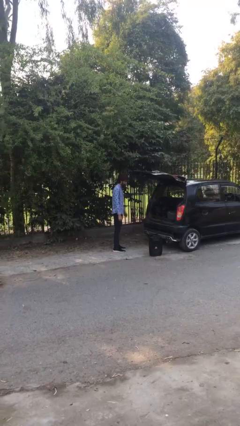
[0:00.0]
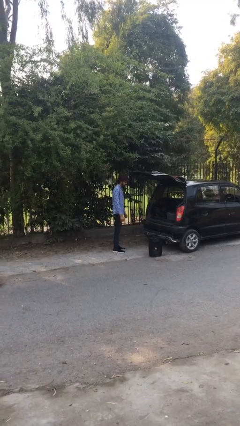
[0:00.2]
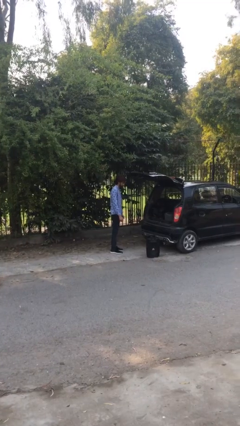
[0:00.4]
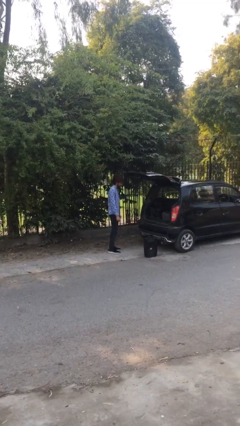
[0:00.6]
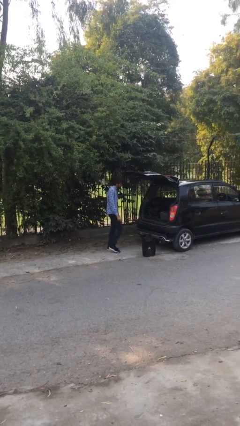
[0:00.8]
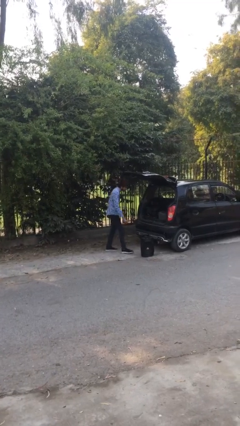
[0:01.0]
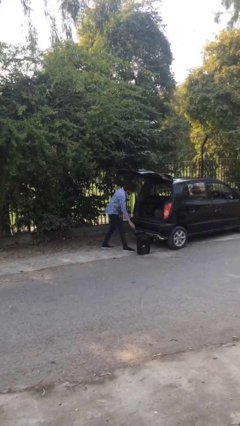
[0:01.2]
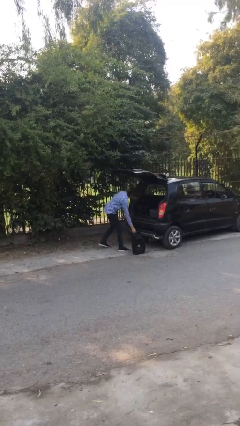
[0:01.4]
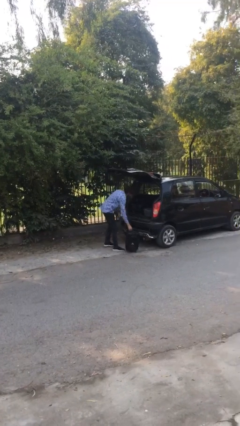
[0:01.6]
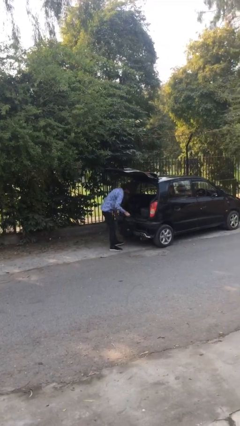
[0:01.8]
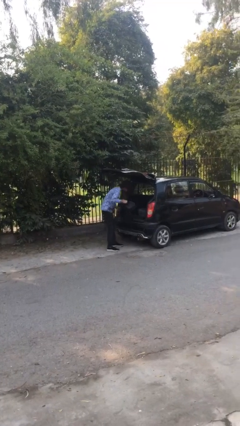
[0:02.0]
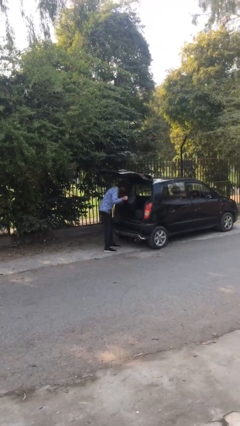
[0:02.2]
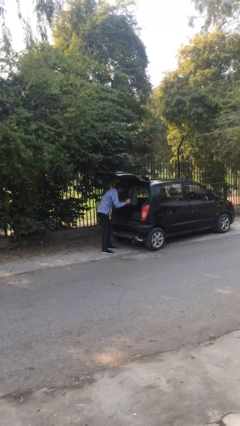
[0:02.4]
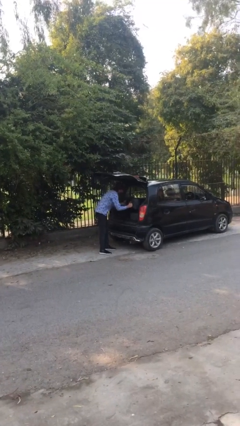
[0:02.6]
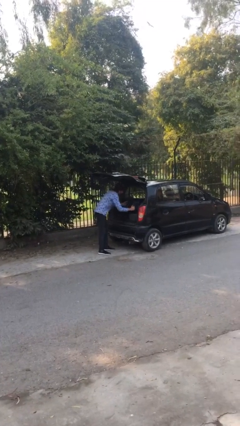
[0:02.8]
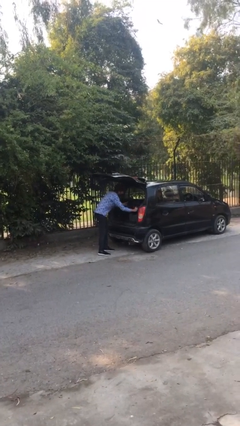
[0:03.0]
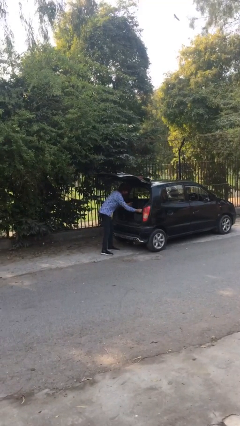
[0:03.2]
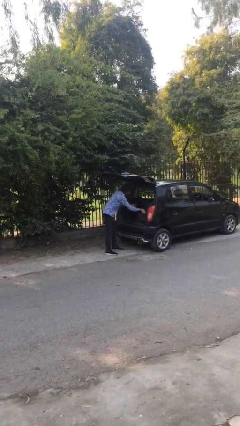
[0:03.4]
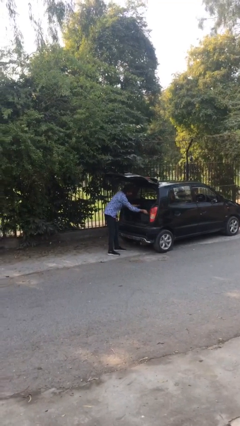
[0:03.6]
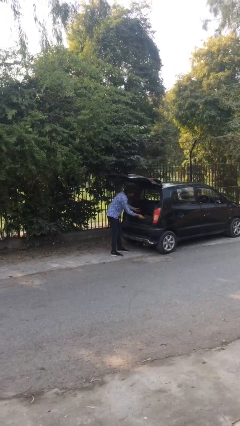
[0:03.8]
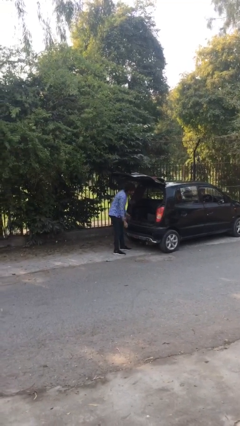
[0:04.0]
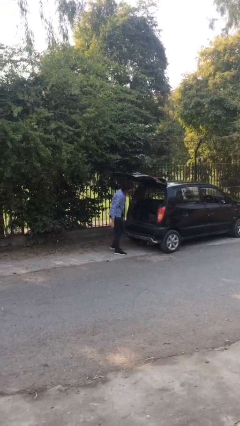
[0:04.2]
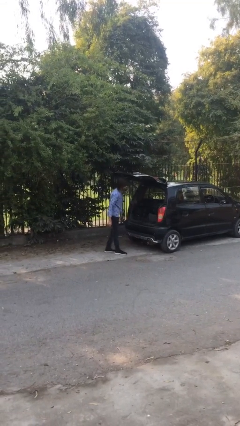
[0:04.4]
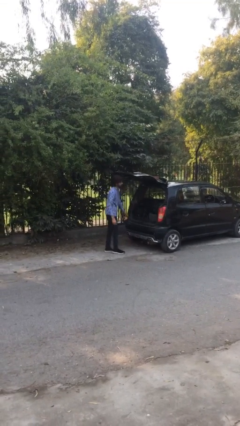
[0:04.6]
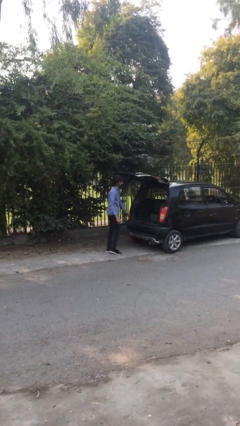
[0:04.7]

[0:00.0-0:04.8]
person loads car

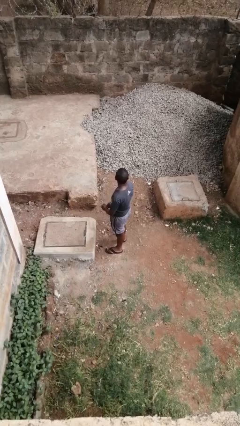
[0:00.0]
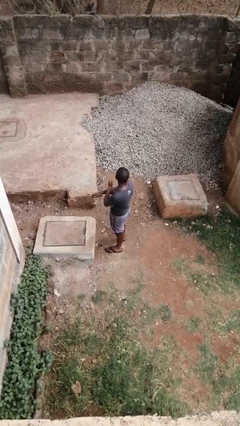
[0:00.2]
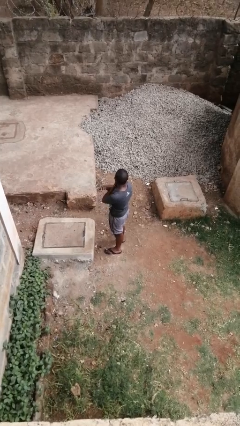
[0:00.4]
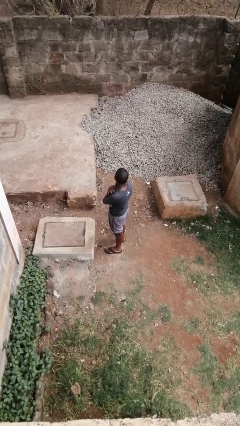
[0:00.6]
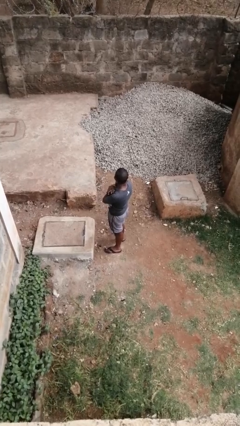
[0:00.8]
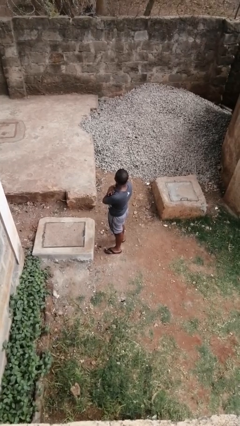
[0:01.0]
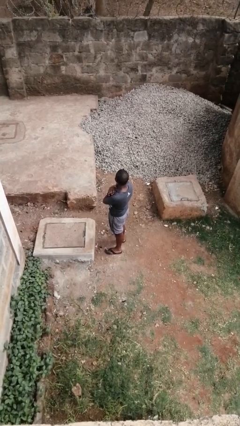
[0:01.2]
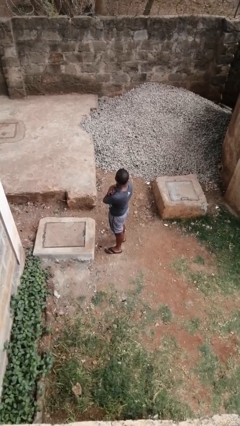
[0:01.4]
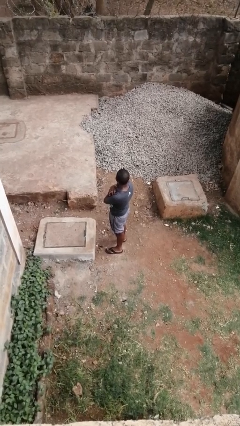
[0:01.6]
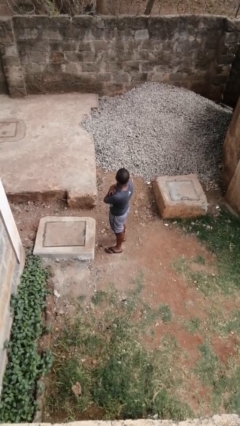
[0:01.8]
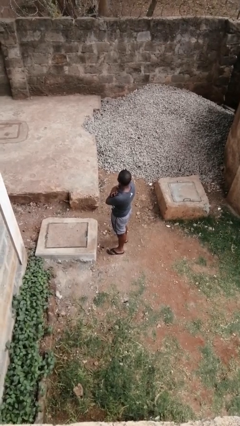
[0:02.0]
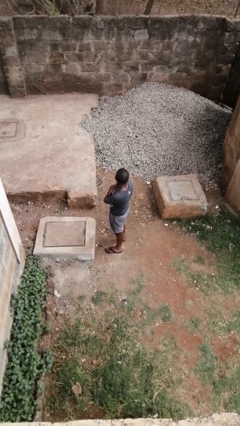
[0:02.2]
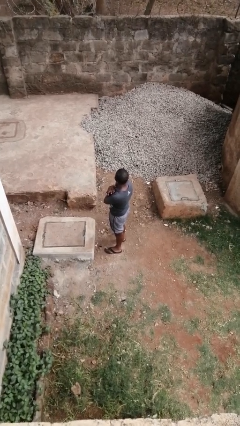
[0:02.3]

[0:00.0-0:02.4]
person gestures arms x

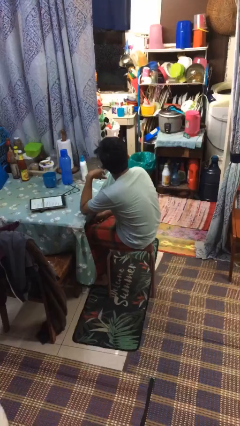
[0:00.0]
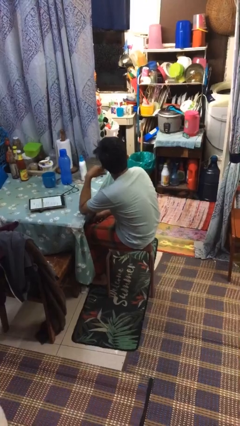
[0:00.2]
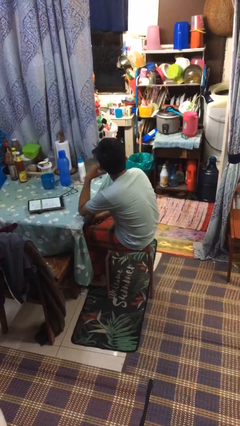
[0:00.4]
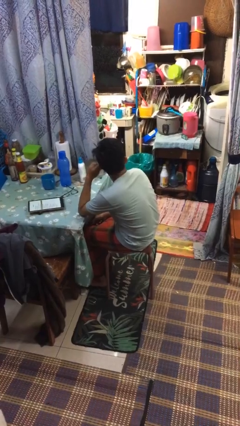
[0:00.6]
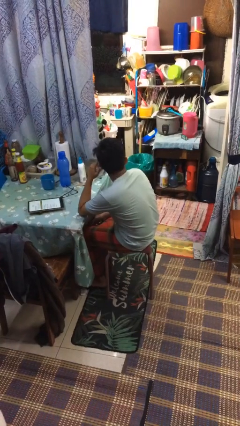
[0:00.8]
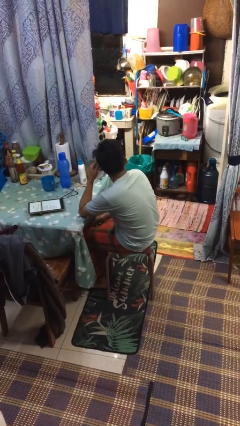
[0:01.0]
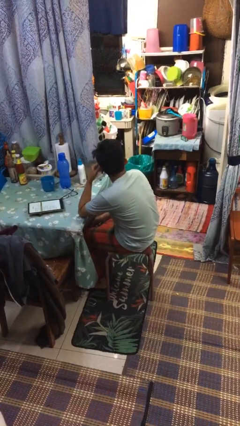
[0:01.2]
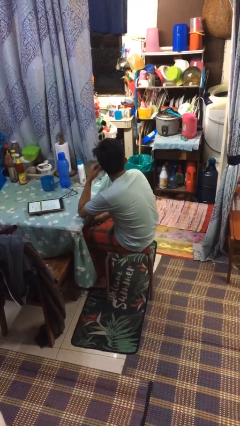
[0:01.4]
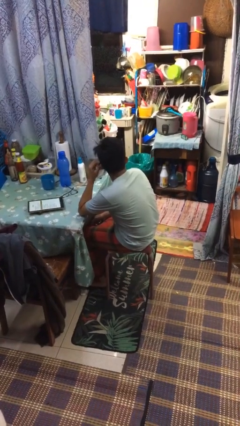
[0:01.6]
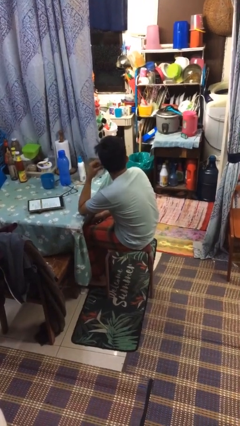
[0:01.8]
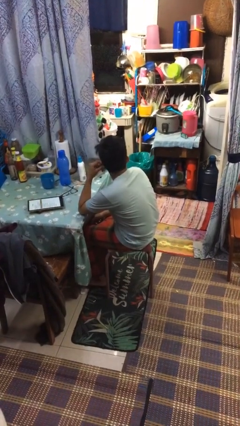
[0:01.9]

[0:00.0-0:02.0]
person touches earlobe

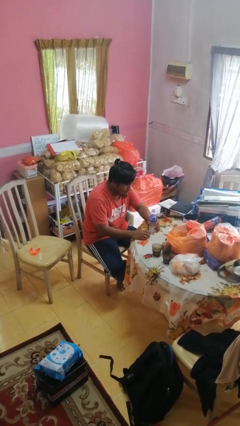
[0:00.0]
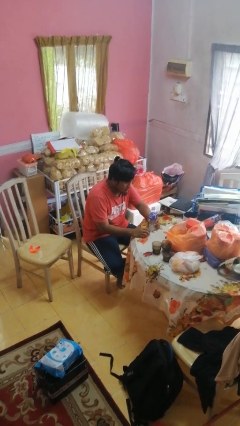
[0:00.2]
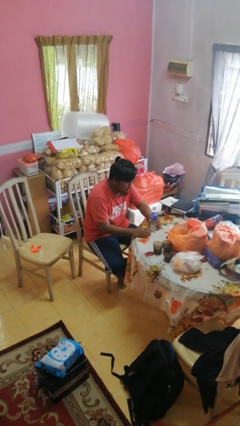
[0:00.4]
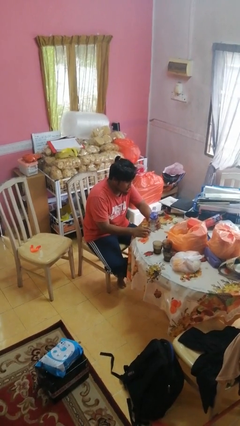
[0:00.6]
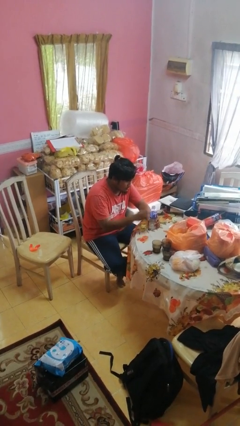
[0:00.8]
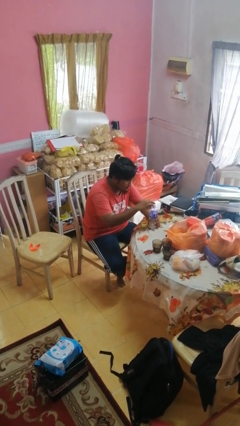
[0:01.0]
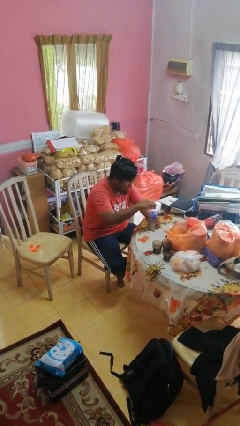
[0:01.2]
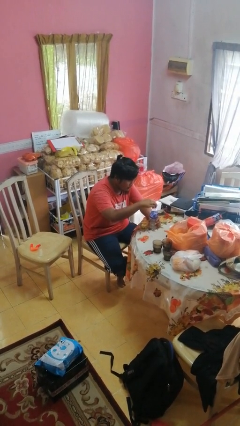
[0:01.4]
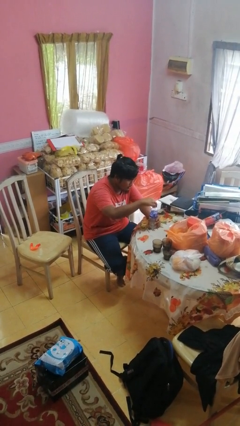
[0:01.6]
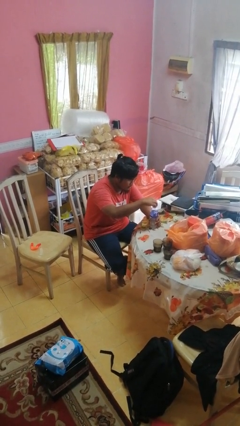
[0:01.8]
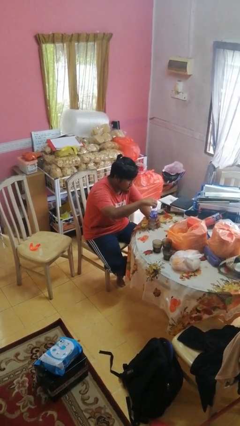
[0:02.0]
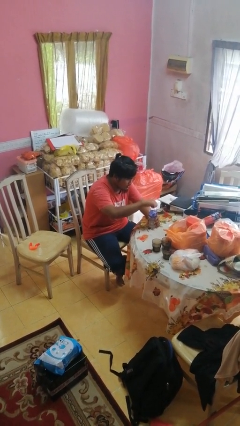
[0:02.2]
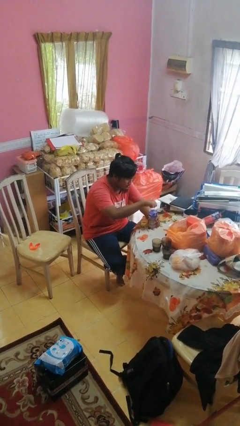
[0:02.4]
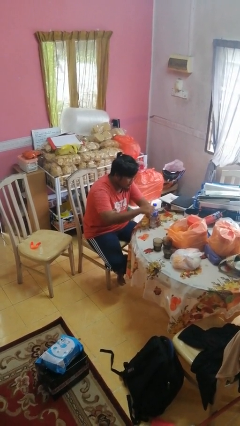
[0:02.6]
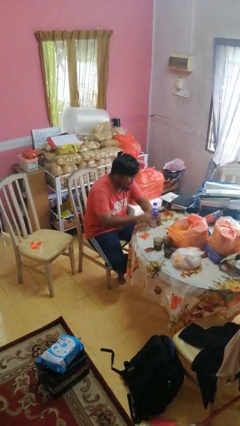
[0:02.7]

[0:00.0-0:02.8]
person screws lid to bottle

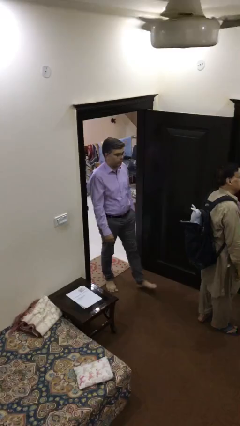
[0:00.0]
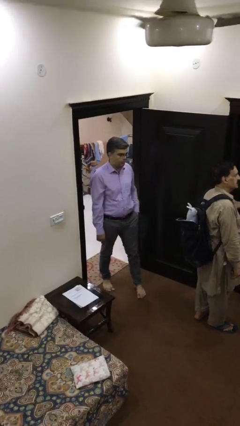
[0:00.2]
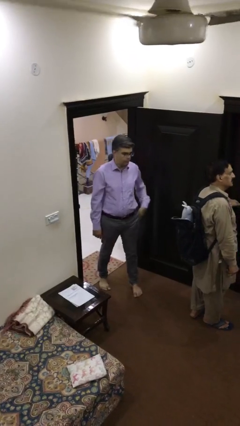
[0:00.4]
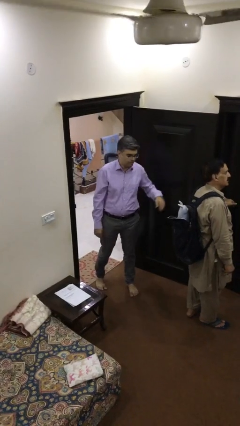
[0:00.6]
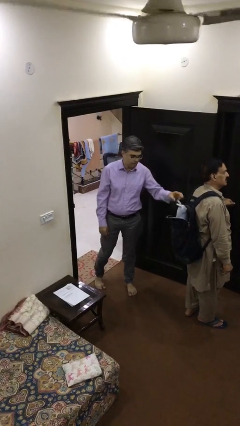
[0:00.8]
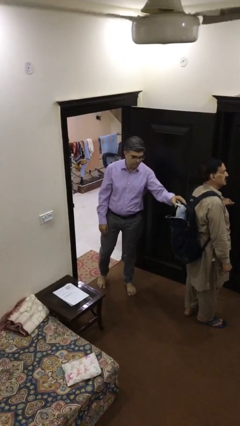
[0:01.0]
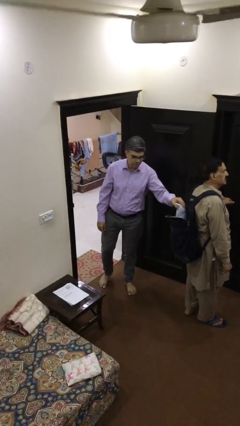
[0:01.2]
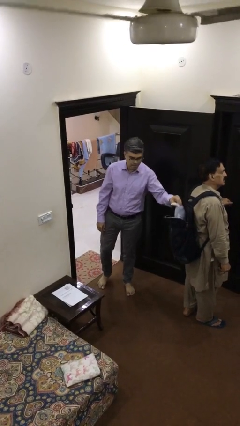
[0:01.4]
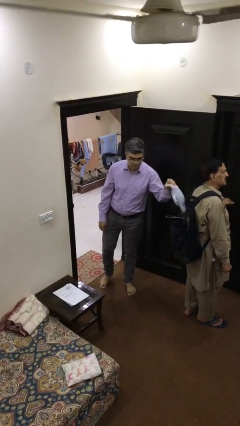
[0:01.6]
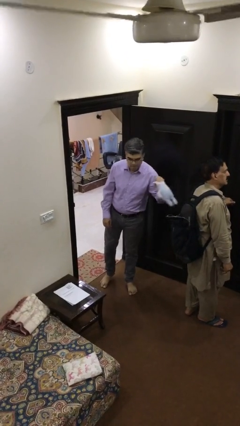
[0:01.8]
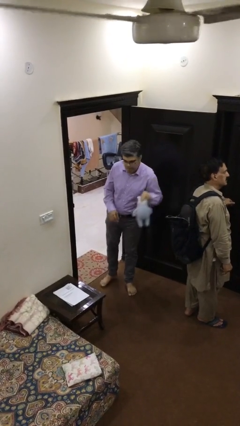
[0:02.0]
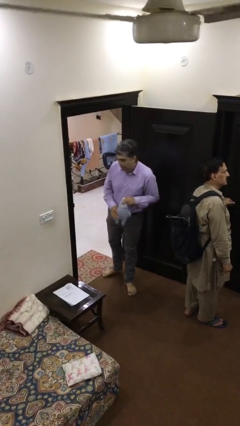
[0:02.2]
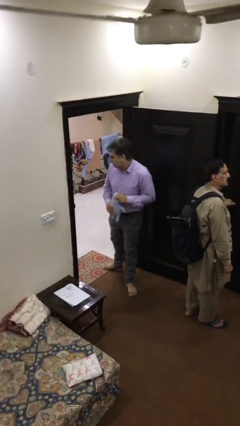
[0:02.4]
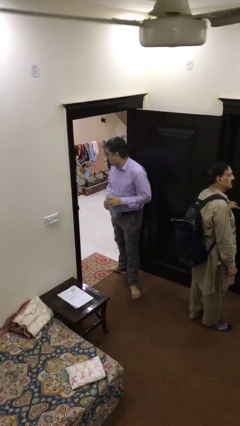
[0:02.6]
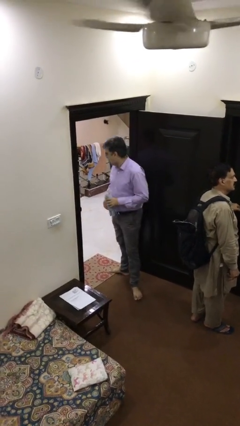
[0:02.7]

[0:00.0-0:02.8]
person steals object from person

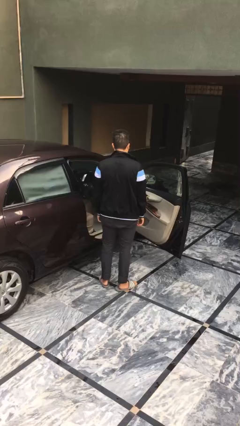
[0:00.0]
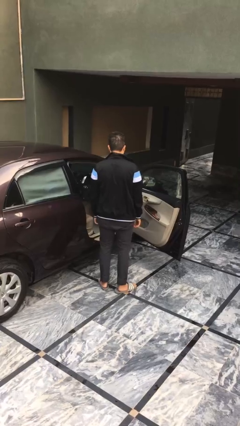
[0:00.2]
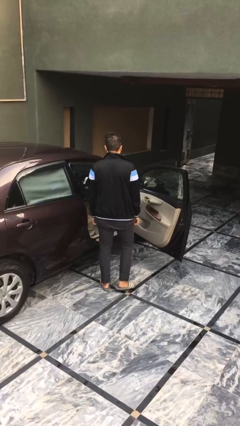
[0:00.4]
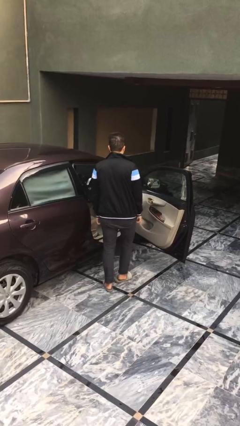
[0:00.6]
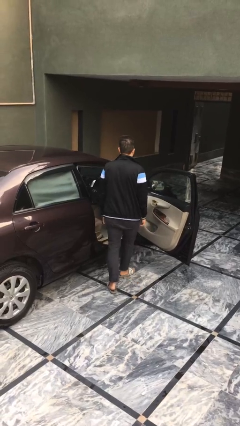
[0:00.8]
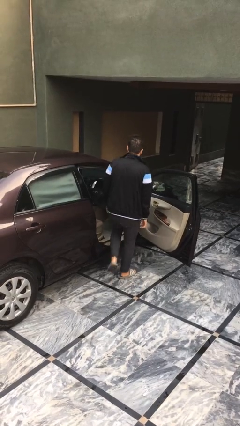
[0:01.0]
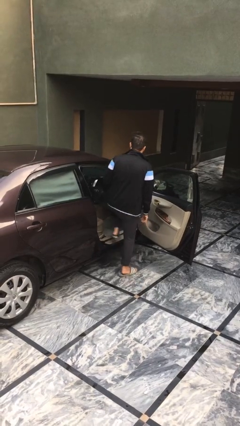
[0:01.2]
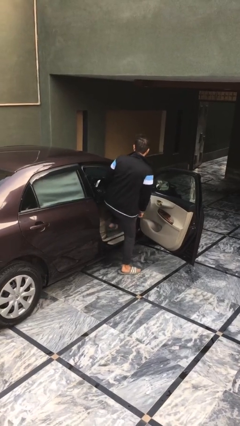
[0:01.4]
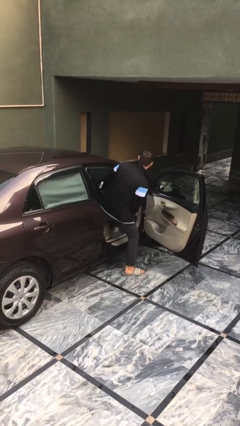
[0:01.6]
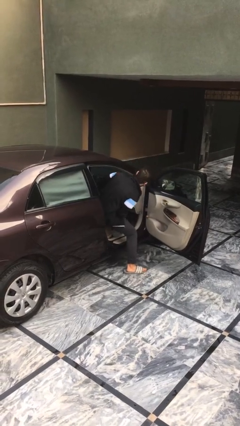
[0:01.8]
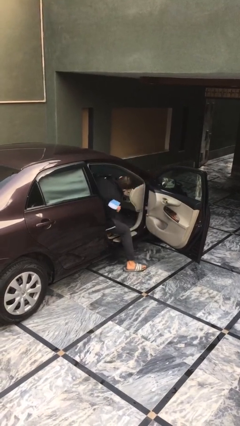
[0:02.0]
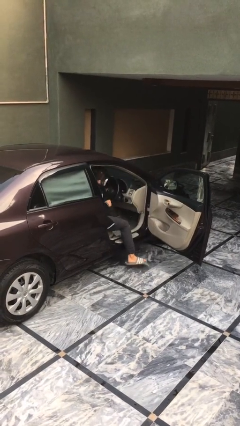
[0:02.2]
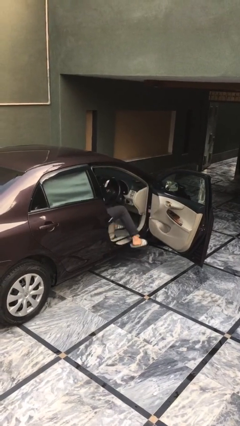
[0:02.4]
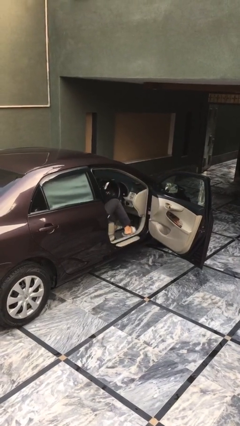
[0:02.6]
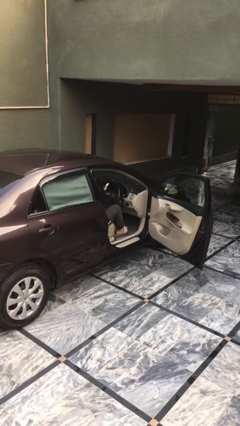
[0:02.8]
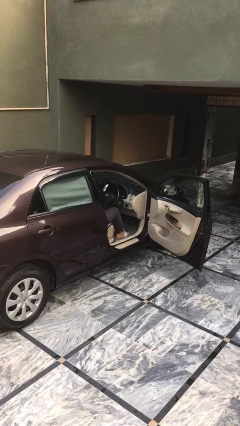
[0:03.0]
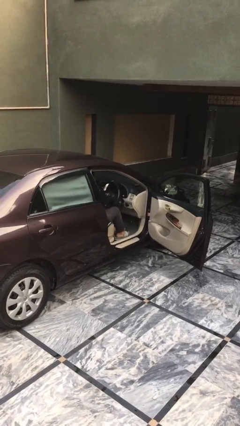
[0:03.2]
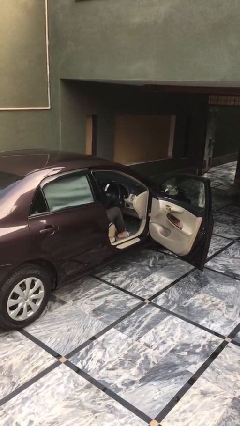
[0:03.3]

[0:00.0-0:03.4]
person enters car
